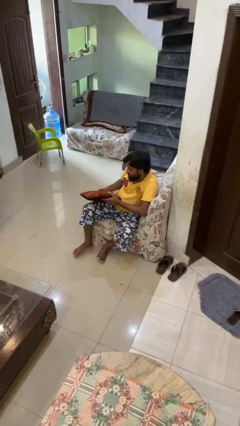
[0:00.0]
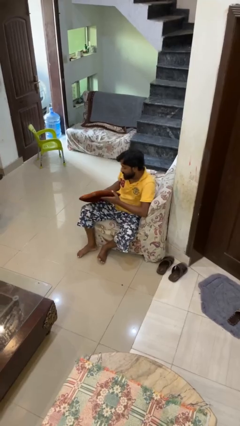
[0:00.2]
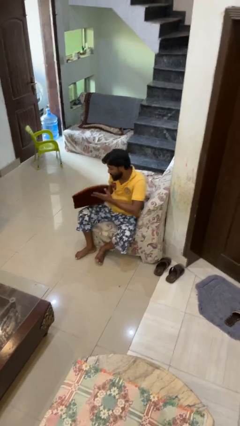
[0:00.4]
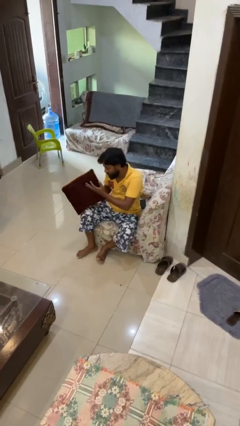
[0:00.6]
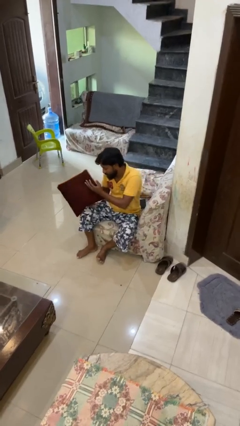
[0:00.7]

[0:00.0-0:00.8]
person drops object

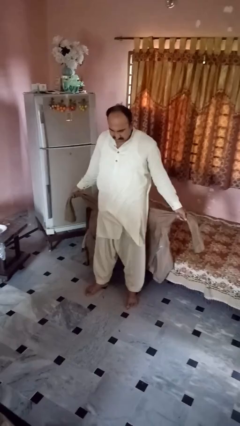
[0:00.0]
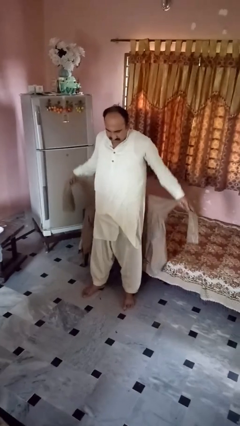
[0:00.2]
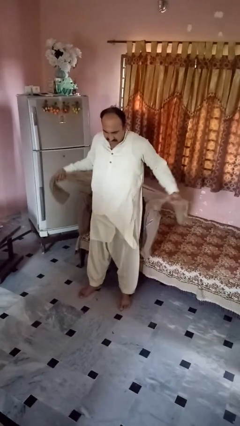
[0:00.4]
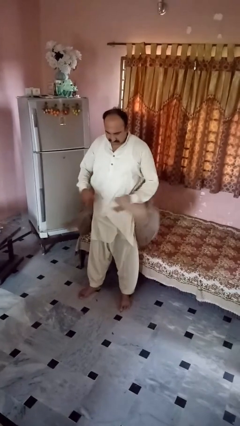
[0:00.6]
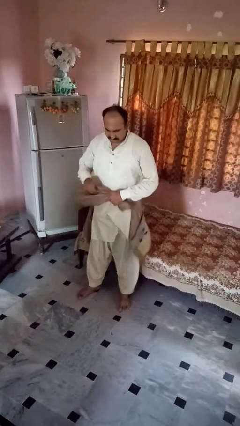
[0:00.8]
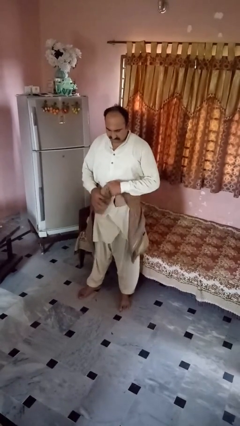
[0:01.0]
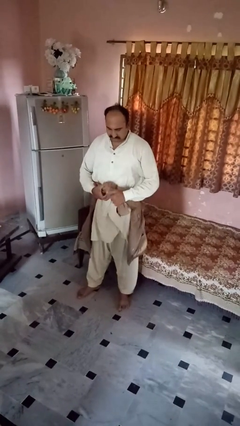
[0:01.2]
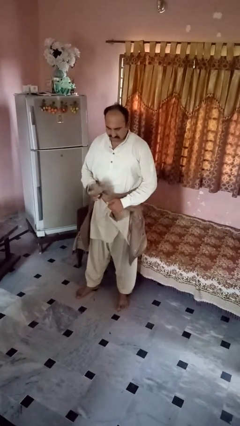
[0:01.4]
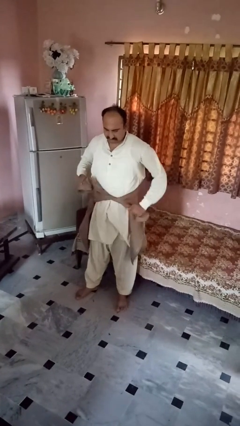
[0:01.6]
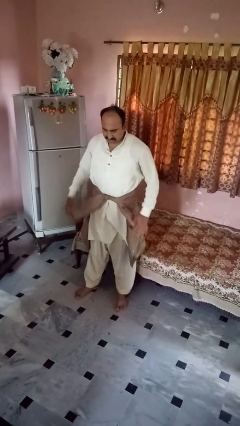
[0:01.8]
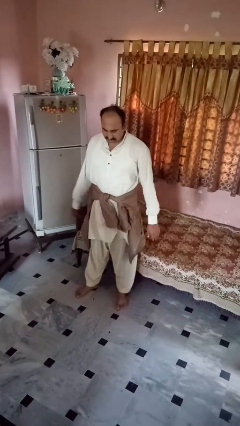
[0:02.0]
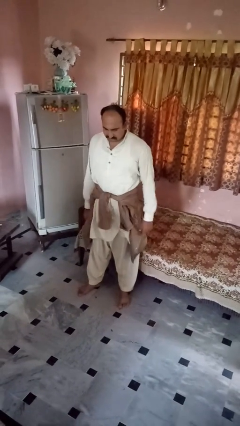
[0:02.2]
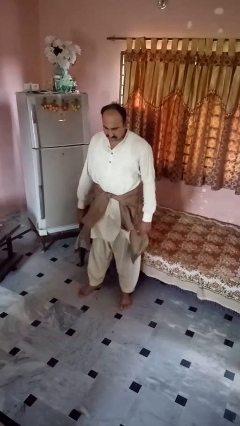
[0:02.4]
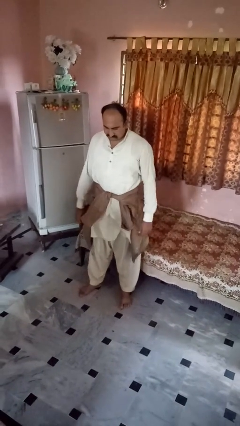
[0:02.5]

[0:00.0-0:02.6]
person ties jacket around waist

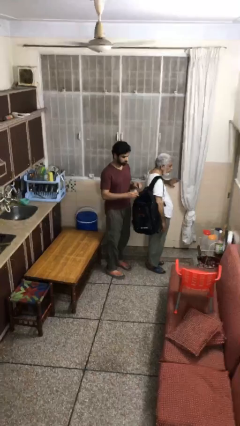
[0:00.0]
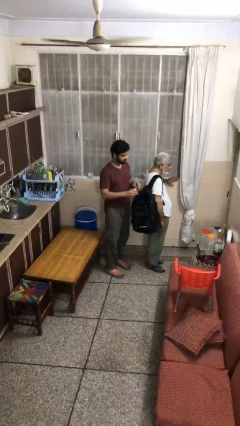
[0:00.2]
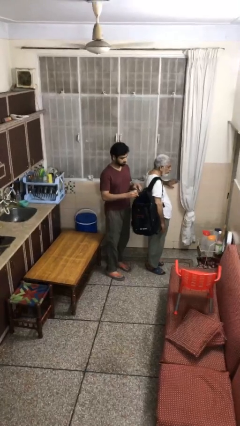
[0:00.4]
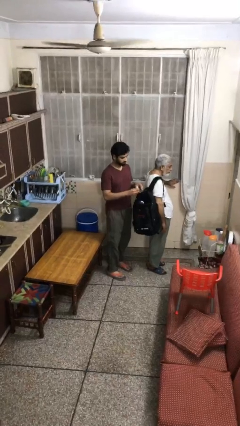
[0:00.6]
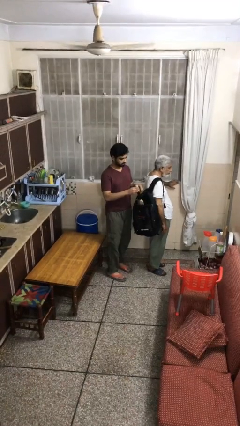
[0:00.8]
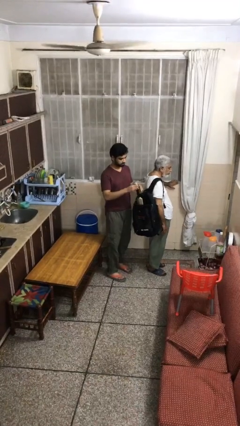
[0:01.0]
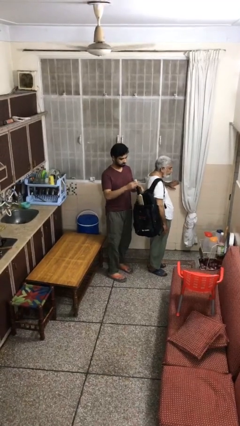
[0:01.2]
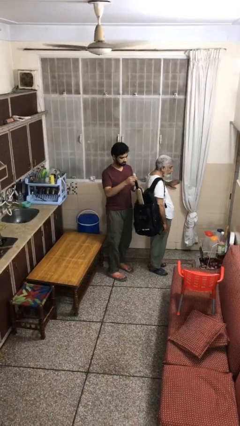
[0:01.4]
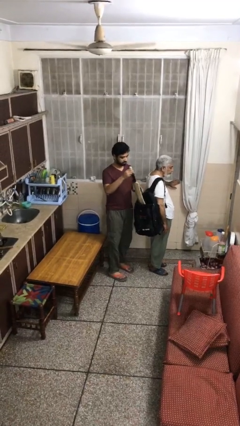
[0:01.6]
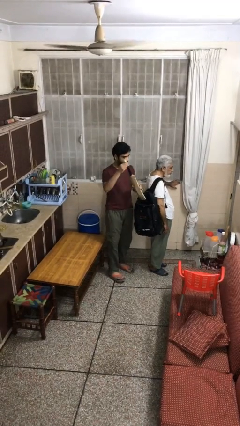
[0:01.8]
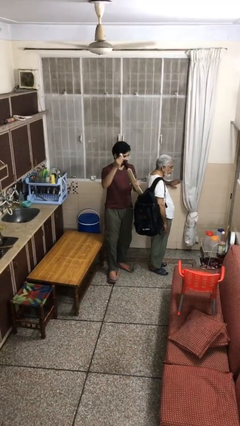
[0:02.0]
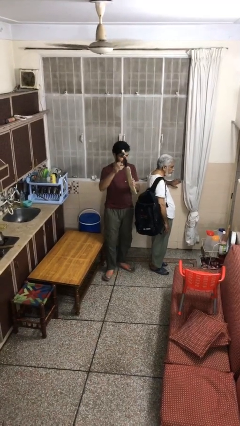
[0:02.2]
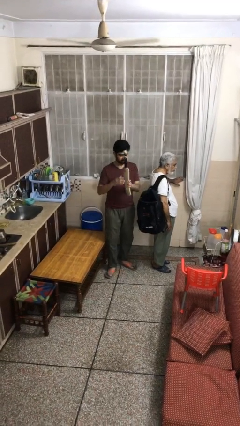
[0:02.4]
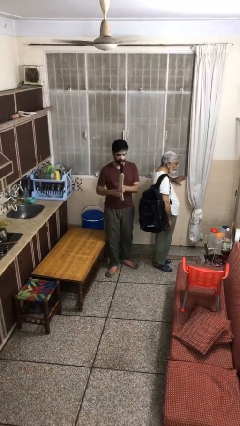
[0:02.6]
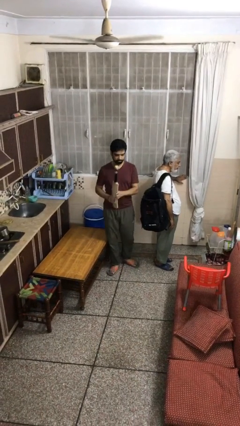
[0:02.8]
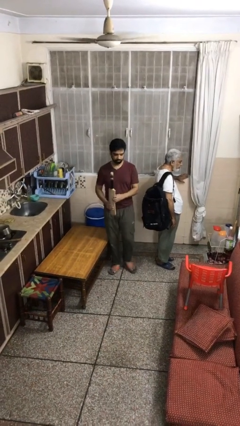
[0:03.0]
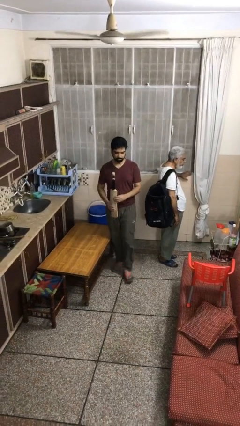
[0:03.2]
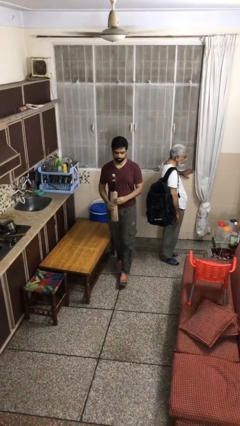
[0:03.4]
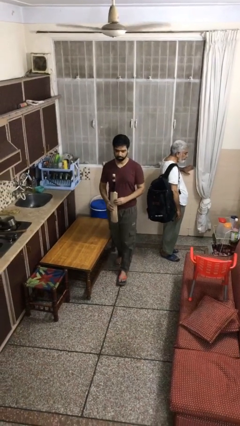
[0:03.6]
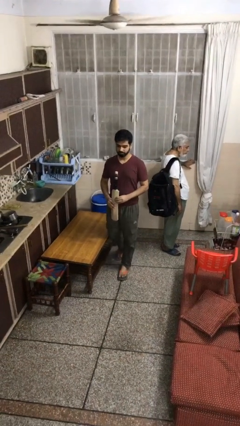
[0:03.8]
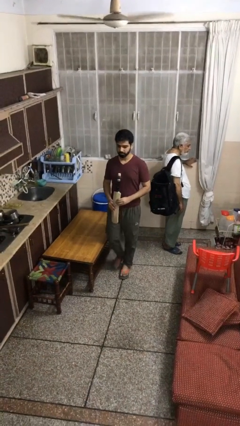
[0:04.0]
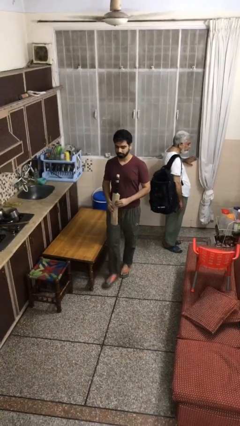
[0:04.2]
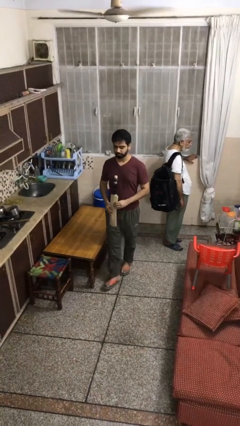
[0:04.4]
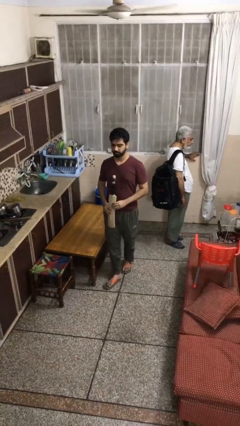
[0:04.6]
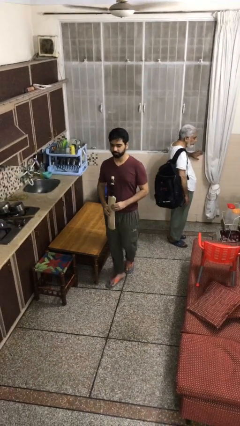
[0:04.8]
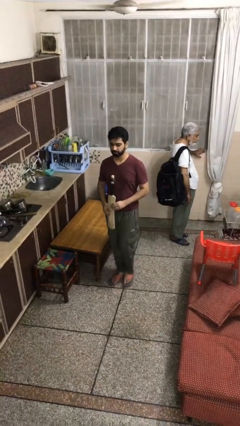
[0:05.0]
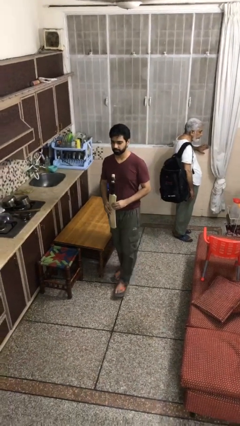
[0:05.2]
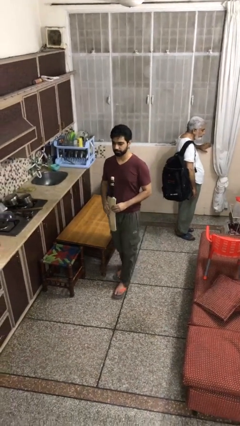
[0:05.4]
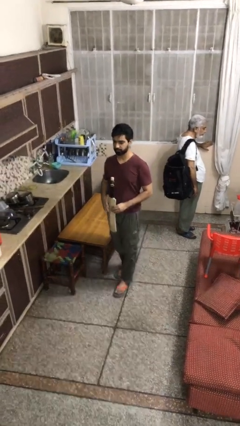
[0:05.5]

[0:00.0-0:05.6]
person steals object from person

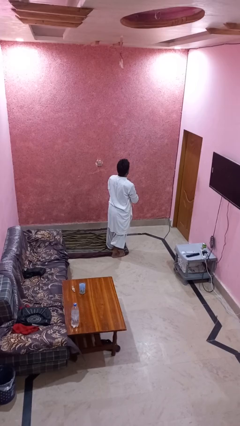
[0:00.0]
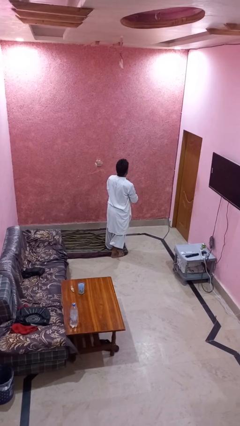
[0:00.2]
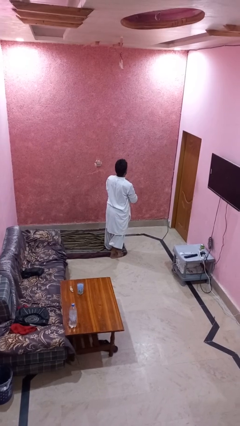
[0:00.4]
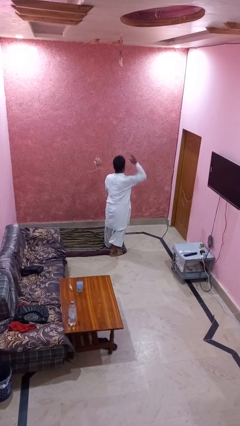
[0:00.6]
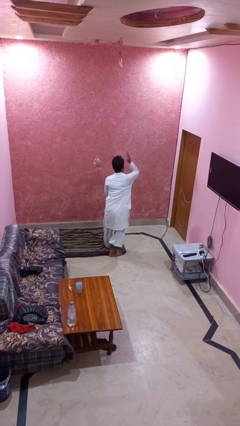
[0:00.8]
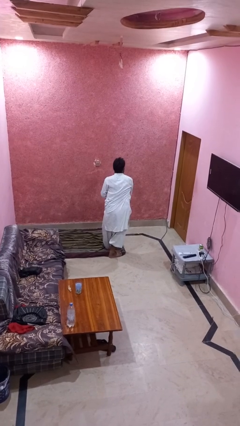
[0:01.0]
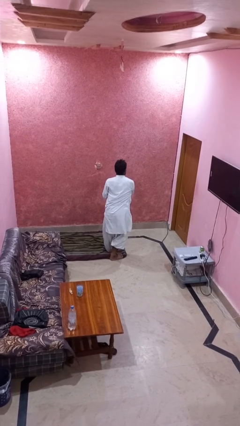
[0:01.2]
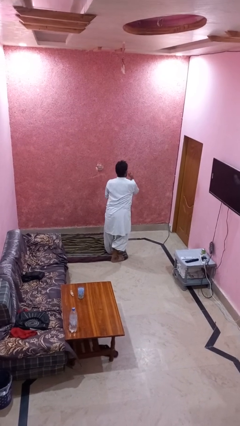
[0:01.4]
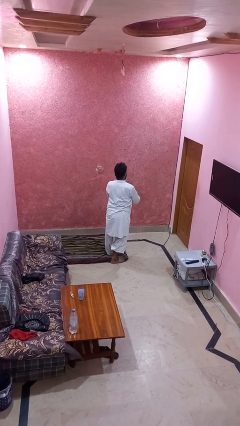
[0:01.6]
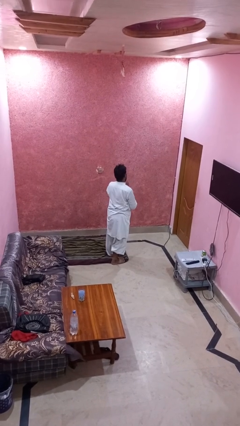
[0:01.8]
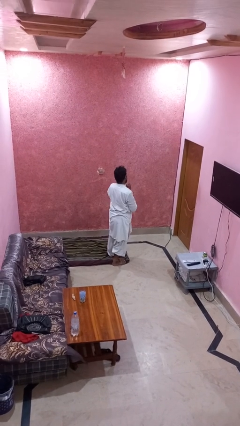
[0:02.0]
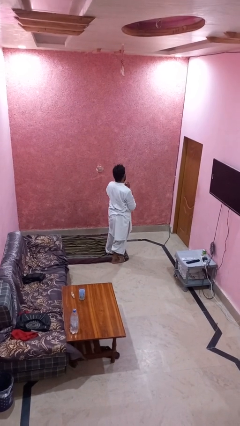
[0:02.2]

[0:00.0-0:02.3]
person karate chop

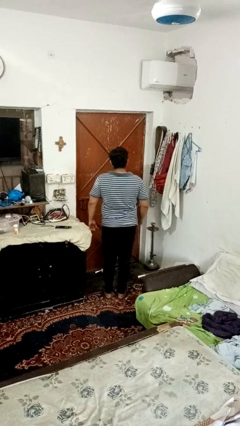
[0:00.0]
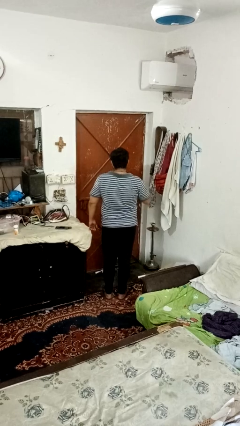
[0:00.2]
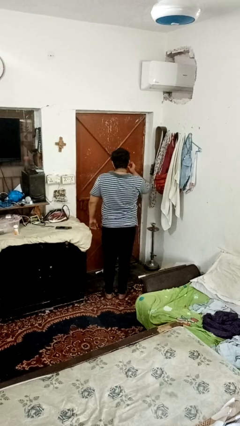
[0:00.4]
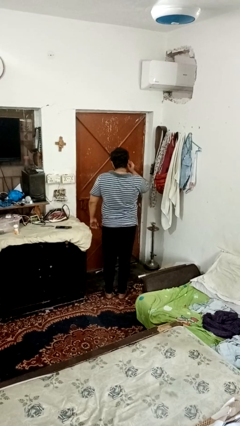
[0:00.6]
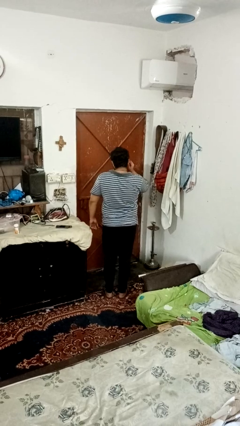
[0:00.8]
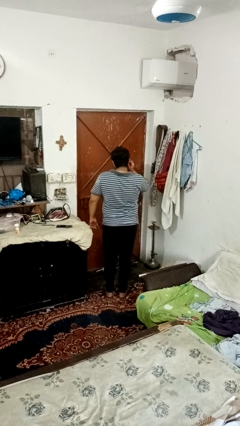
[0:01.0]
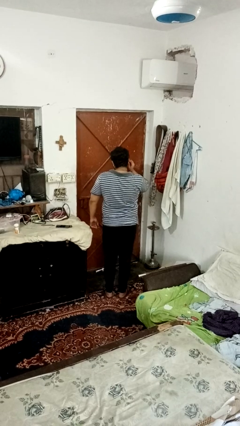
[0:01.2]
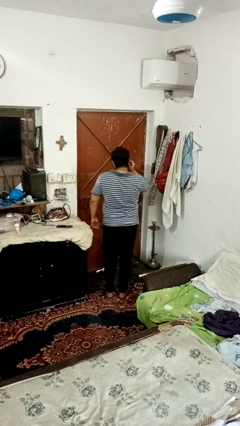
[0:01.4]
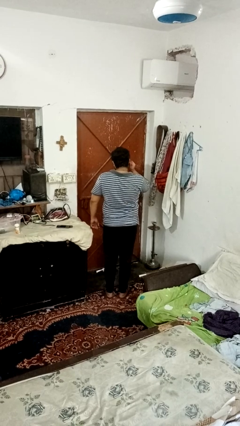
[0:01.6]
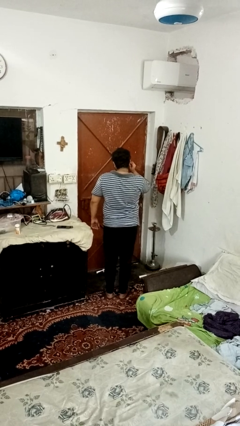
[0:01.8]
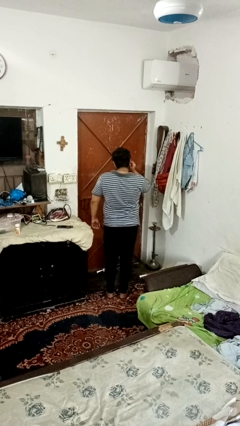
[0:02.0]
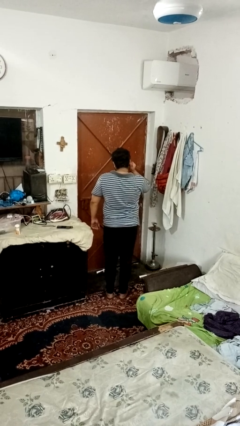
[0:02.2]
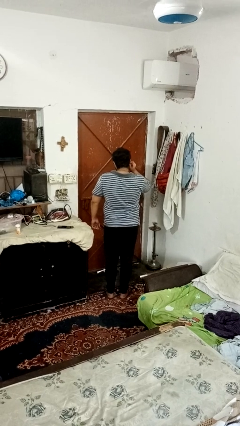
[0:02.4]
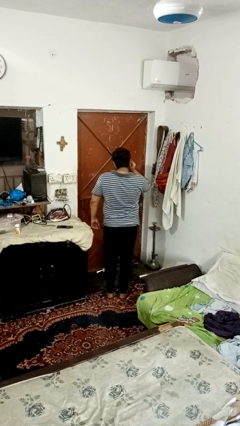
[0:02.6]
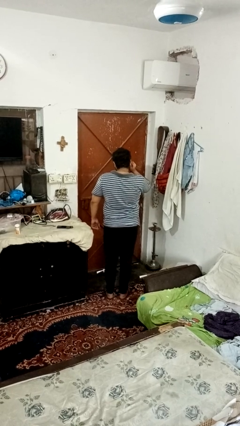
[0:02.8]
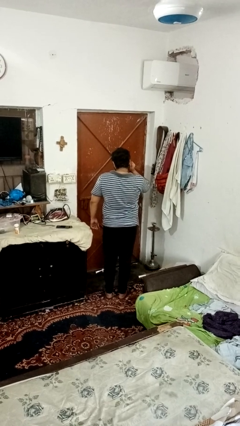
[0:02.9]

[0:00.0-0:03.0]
person touches earlobe

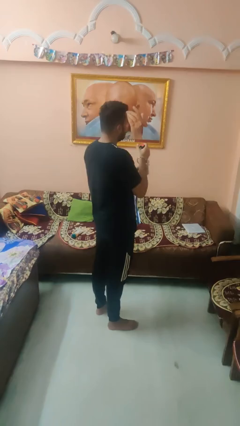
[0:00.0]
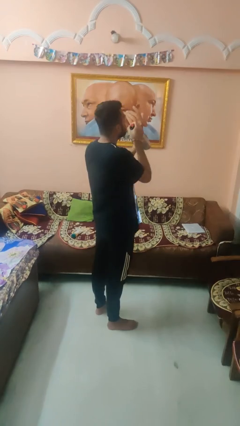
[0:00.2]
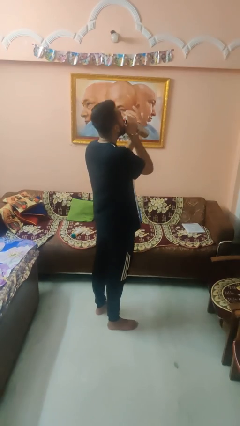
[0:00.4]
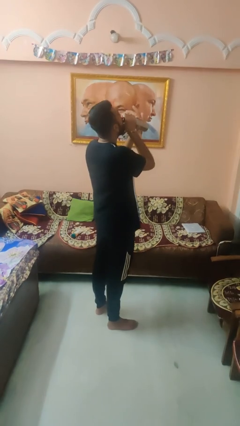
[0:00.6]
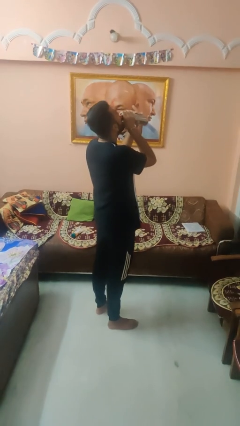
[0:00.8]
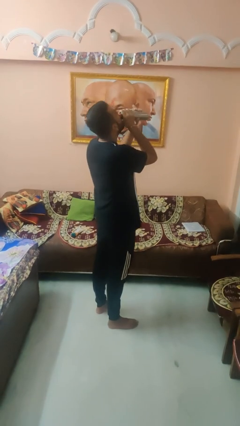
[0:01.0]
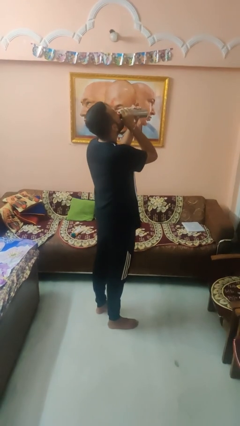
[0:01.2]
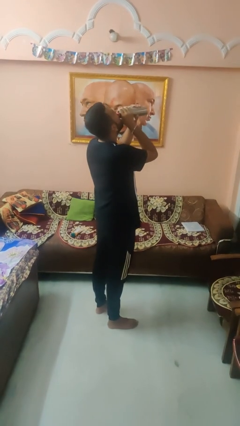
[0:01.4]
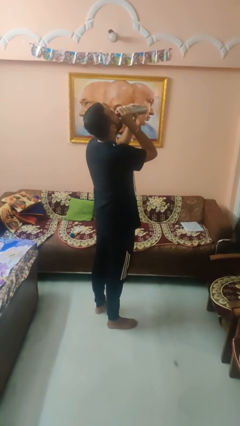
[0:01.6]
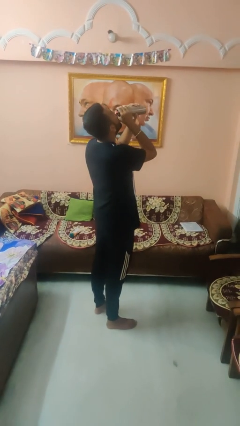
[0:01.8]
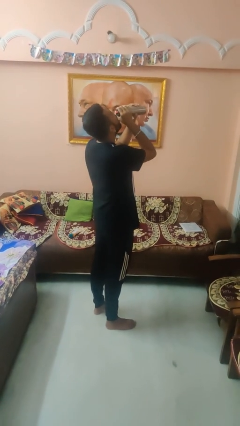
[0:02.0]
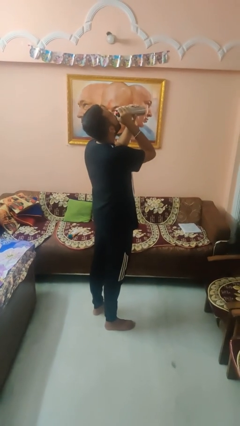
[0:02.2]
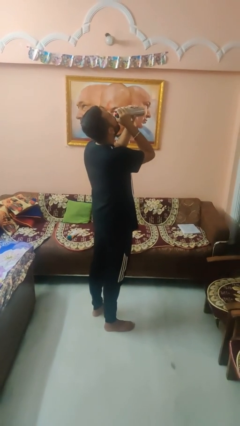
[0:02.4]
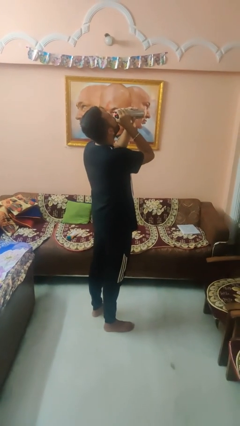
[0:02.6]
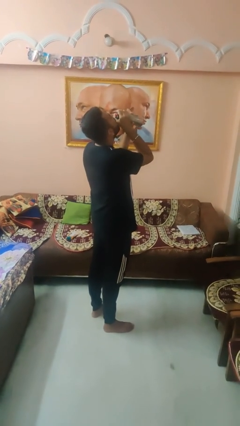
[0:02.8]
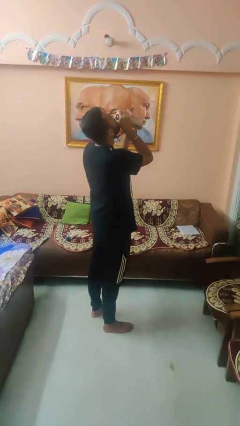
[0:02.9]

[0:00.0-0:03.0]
person drinks from bottle

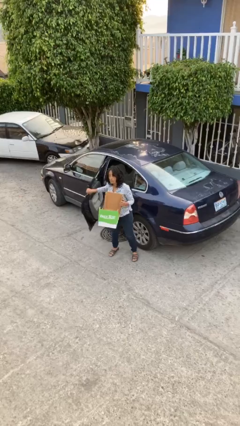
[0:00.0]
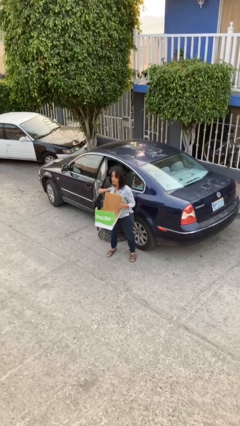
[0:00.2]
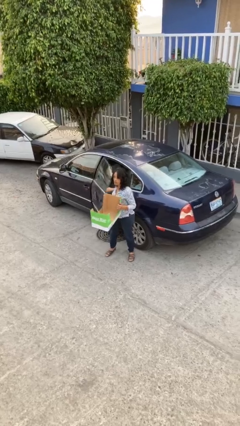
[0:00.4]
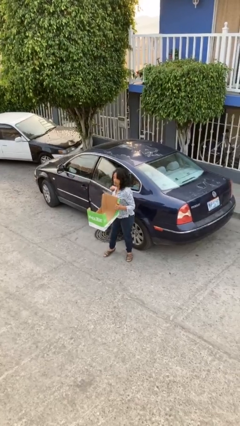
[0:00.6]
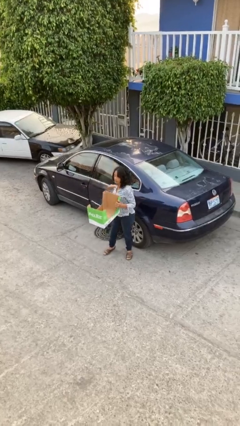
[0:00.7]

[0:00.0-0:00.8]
person closes car door
